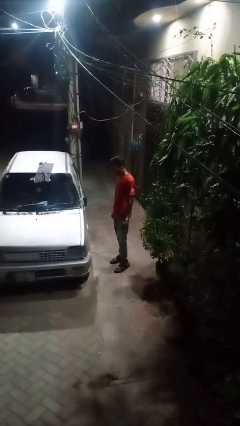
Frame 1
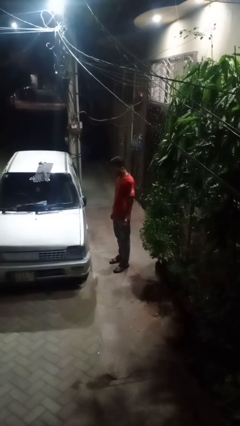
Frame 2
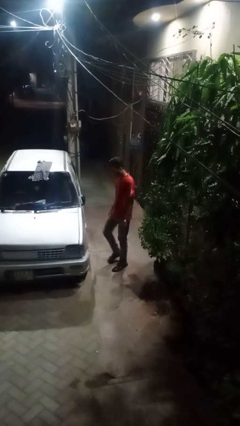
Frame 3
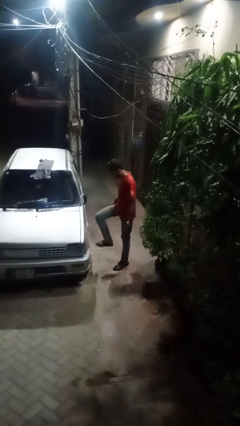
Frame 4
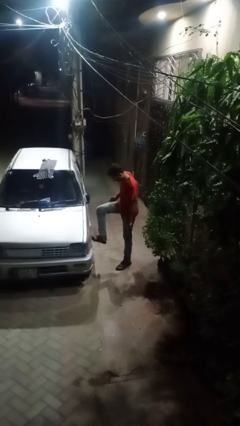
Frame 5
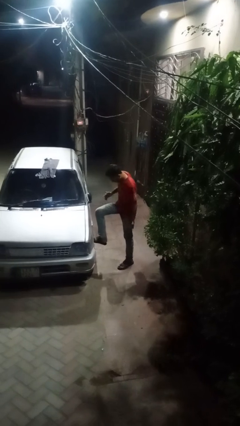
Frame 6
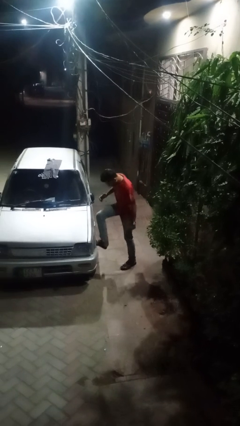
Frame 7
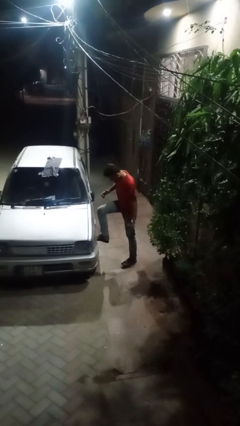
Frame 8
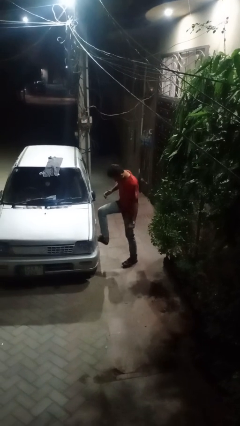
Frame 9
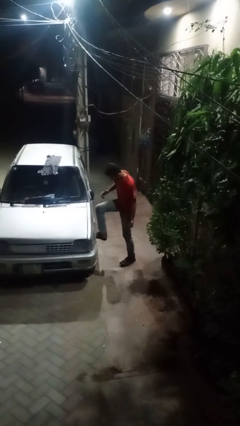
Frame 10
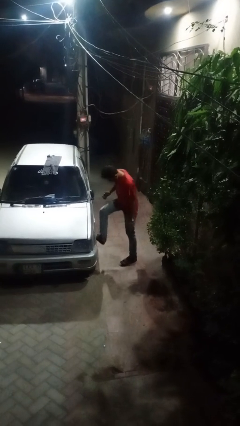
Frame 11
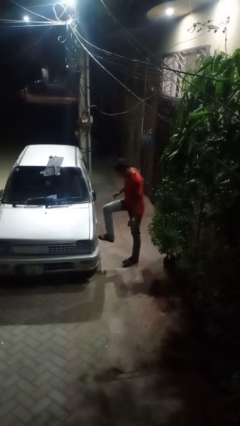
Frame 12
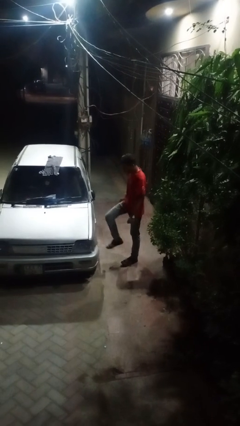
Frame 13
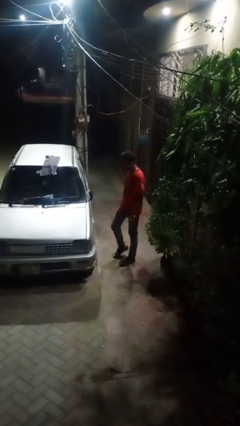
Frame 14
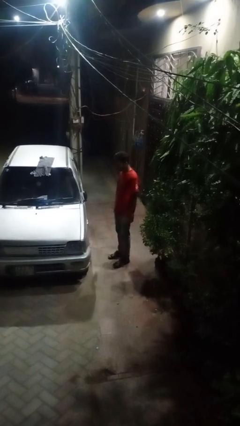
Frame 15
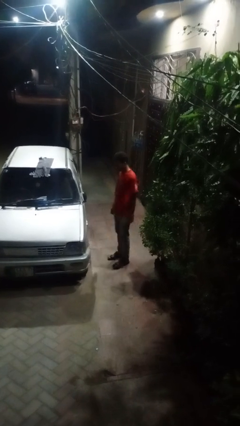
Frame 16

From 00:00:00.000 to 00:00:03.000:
person kicks car tires

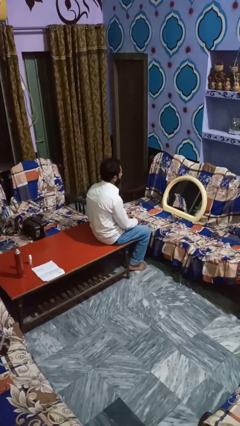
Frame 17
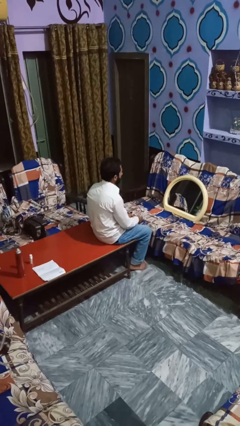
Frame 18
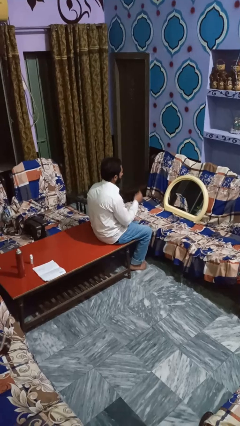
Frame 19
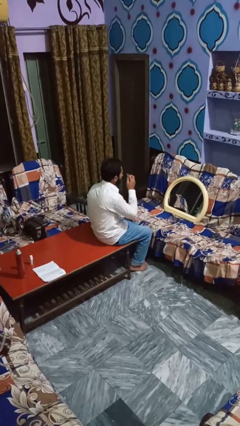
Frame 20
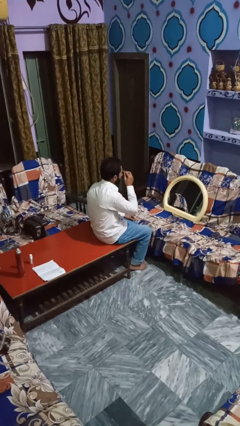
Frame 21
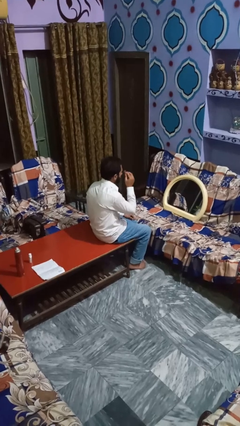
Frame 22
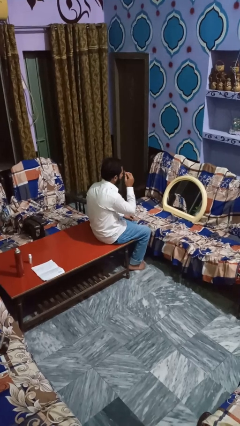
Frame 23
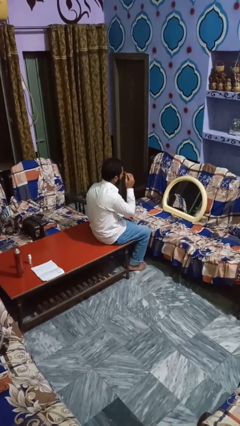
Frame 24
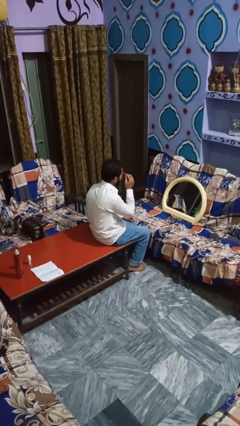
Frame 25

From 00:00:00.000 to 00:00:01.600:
person applies eye makeup

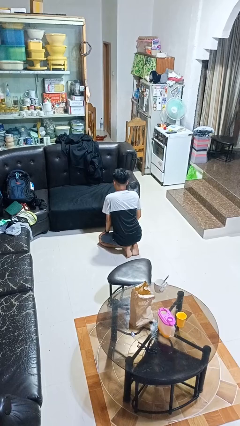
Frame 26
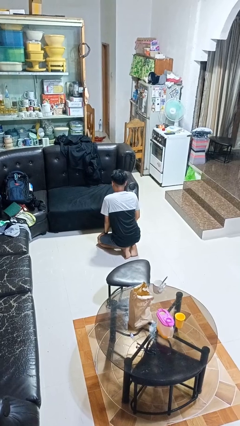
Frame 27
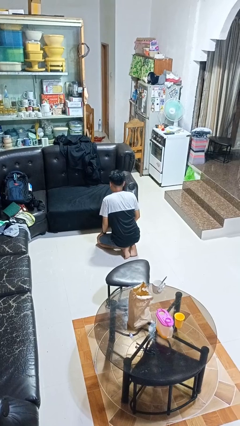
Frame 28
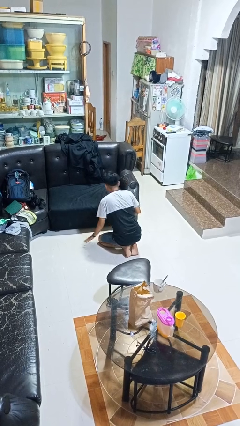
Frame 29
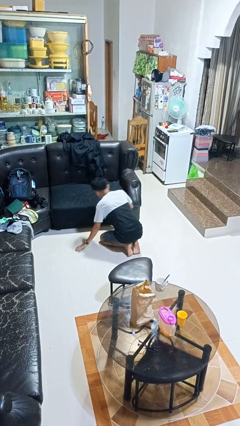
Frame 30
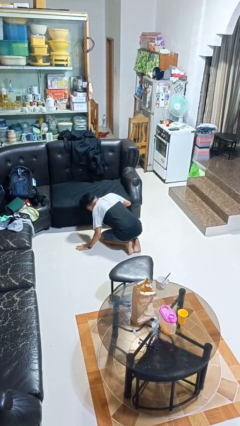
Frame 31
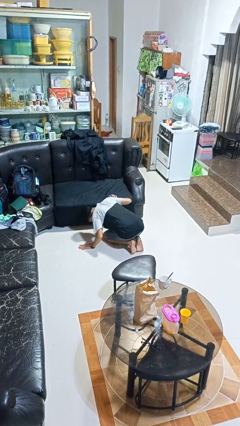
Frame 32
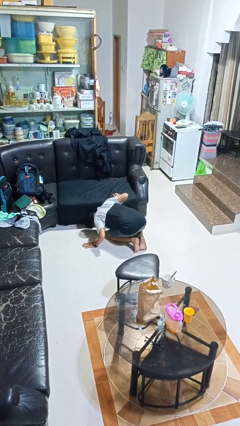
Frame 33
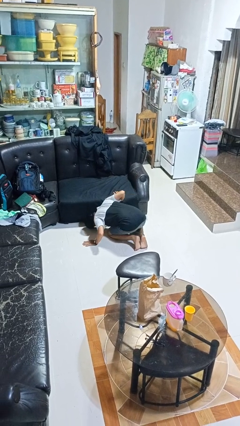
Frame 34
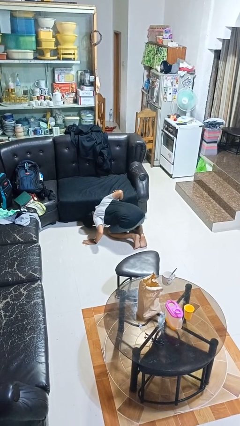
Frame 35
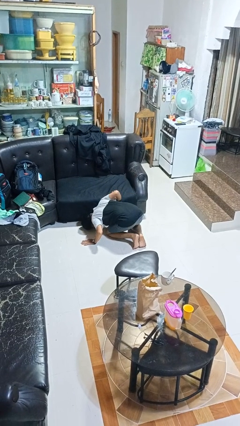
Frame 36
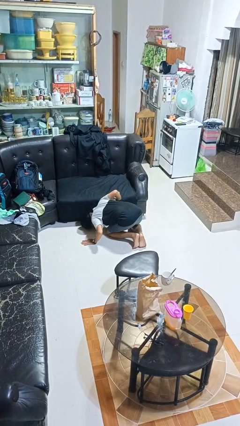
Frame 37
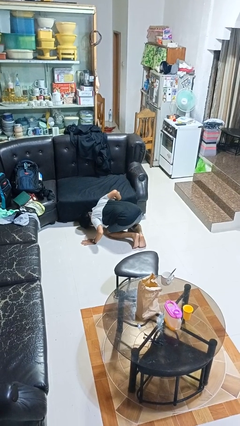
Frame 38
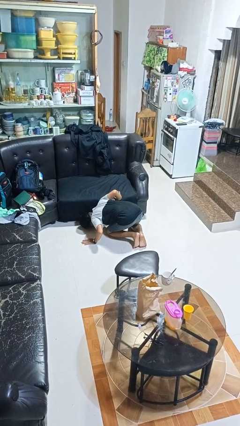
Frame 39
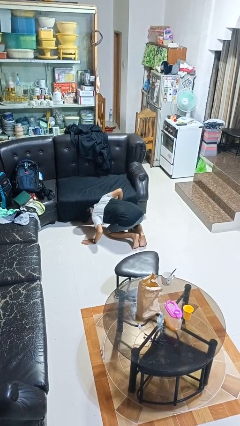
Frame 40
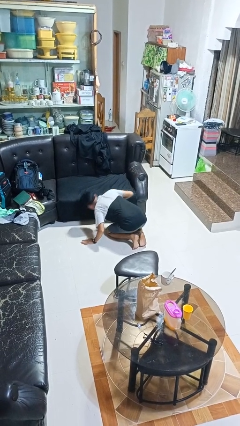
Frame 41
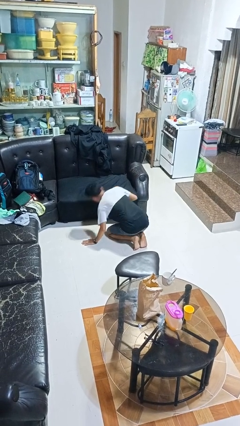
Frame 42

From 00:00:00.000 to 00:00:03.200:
person searches under couch

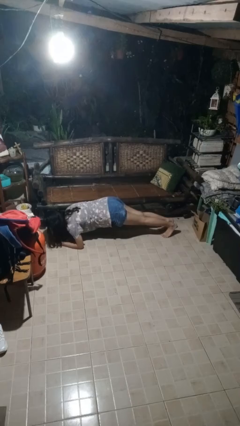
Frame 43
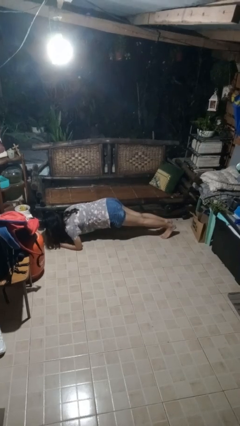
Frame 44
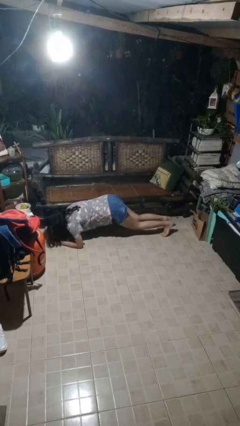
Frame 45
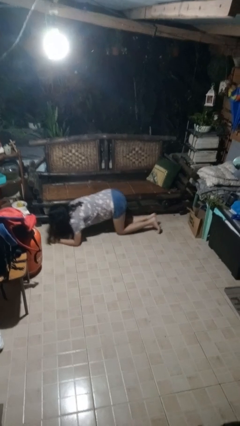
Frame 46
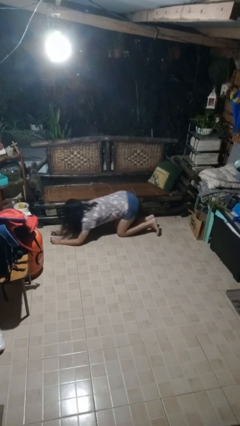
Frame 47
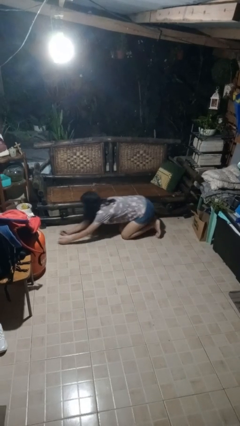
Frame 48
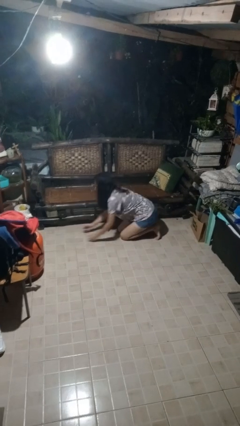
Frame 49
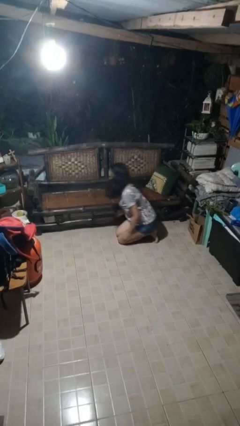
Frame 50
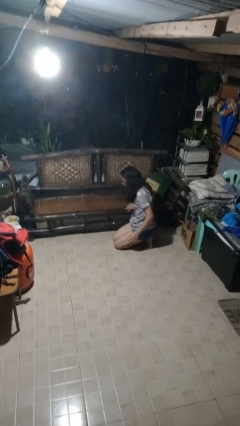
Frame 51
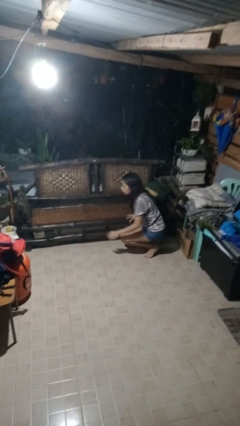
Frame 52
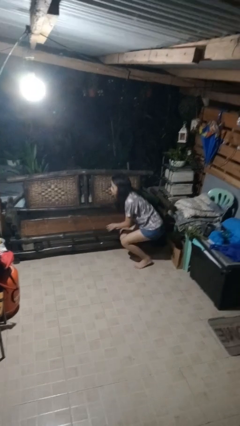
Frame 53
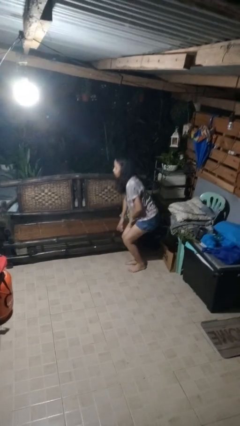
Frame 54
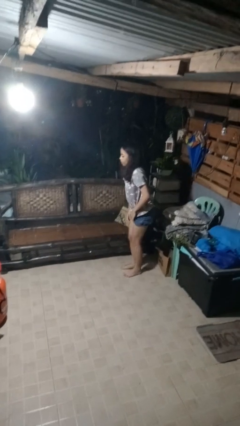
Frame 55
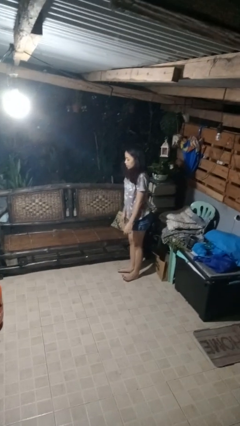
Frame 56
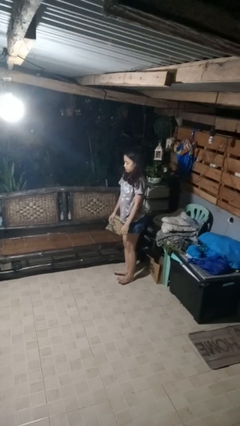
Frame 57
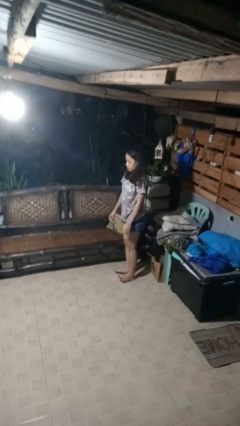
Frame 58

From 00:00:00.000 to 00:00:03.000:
person stands up from floor

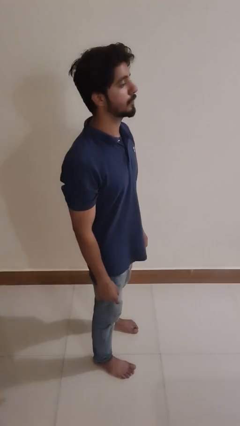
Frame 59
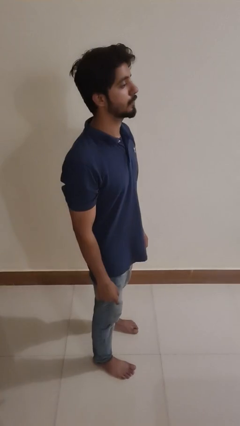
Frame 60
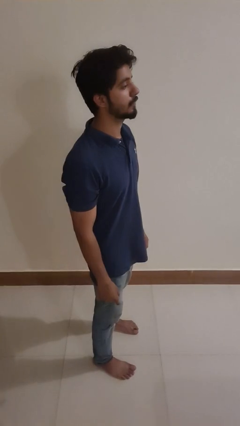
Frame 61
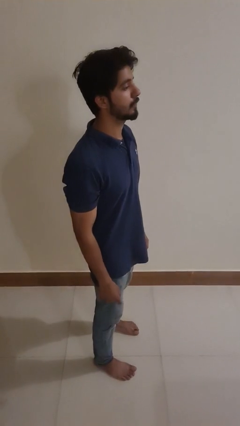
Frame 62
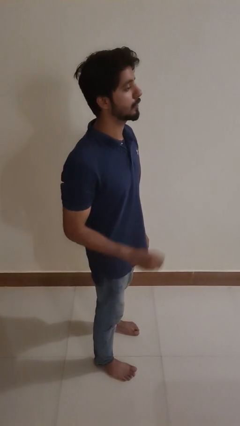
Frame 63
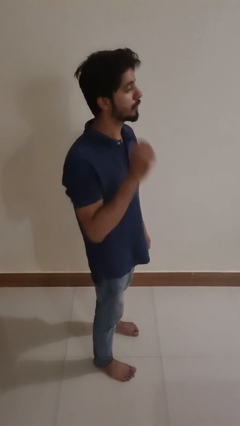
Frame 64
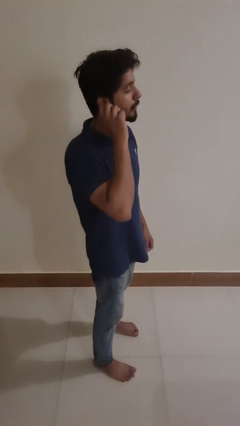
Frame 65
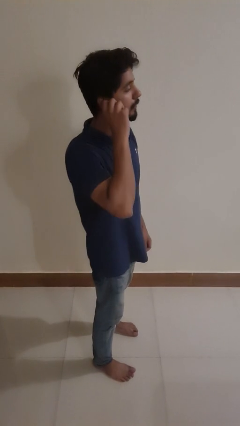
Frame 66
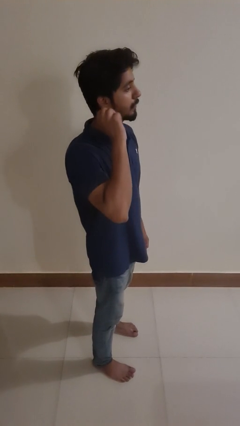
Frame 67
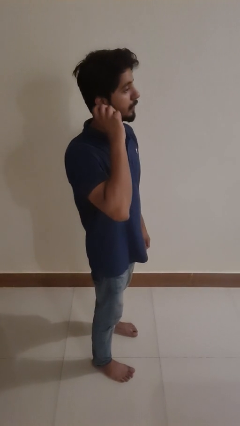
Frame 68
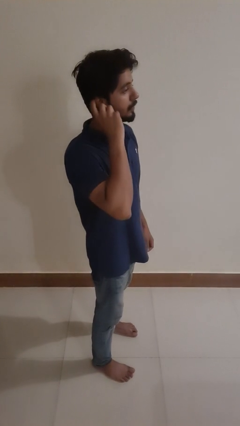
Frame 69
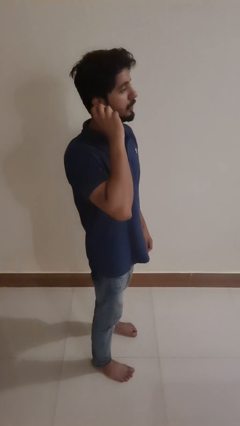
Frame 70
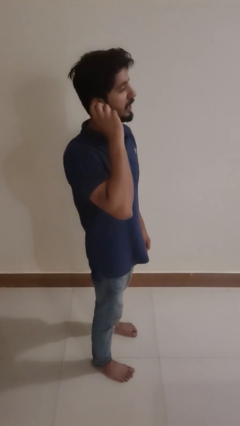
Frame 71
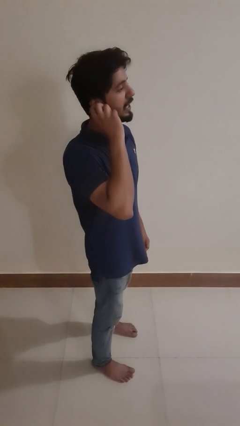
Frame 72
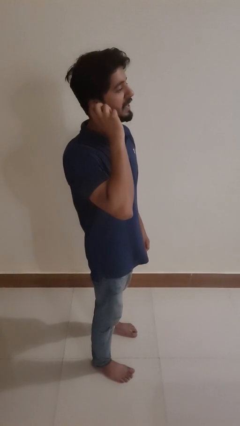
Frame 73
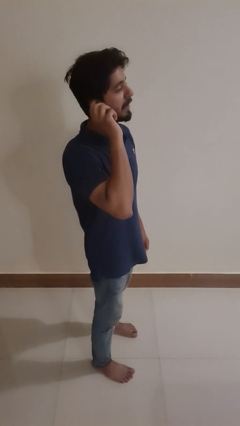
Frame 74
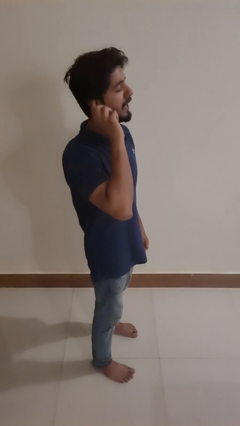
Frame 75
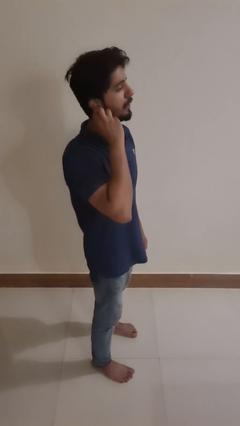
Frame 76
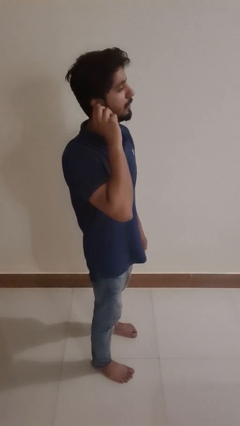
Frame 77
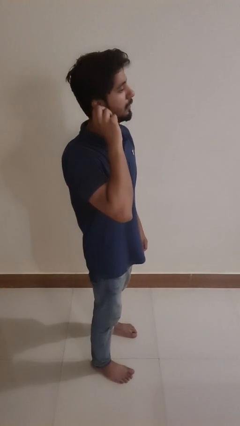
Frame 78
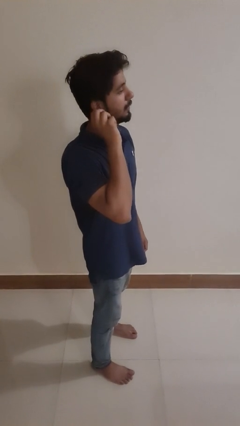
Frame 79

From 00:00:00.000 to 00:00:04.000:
person touches earlobe

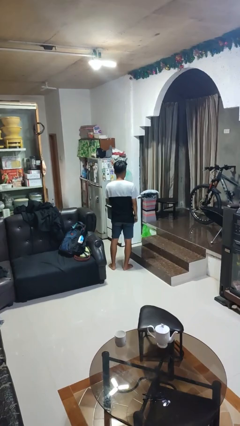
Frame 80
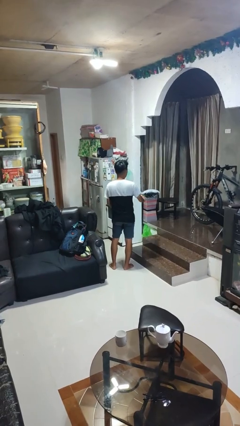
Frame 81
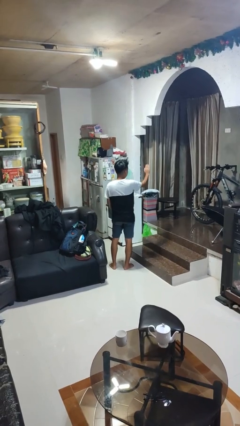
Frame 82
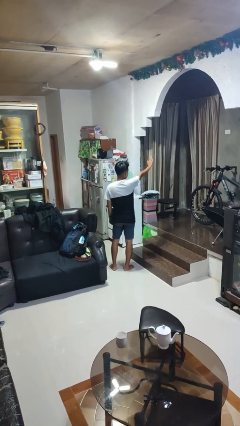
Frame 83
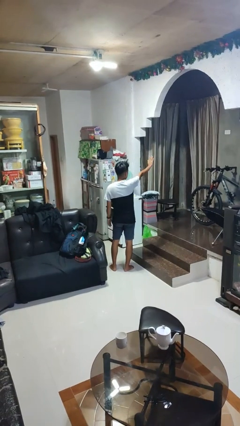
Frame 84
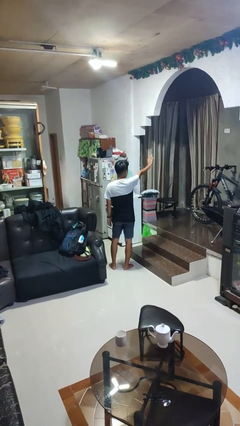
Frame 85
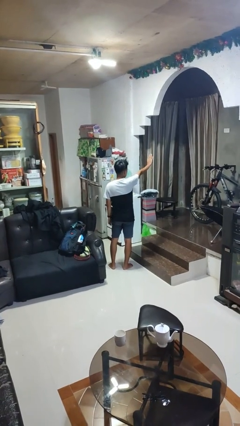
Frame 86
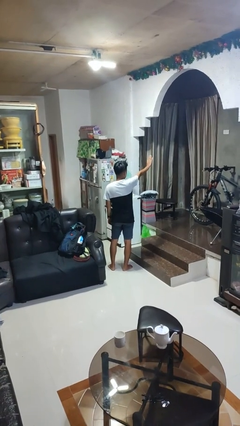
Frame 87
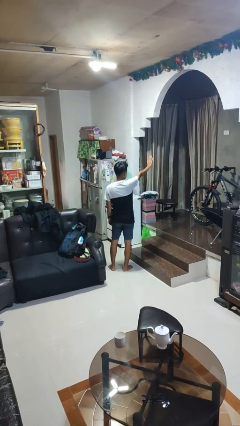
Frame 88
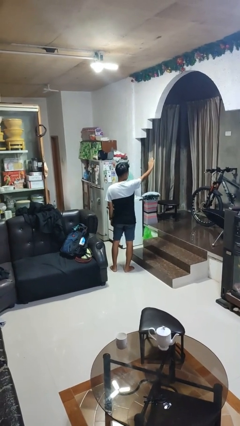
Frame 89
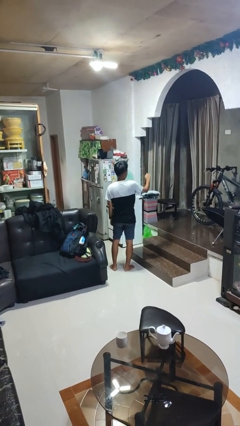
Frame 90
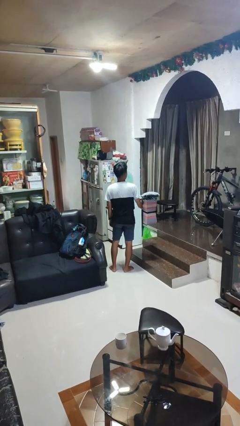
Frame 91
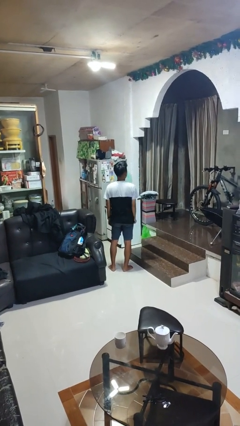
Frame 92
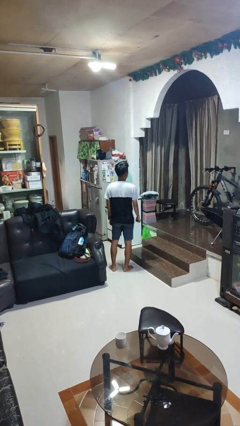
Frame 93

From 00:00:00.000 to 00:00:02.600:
person gestures stop

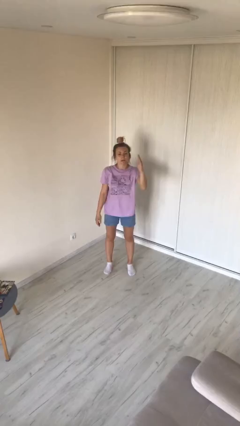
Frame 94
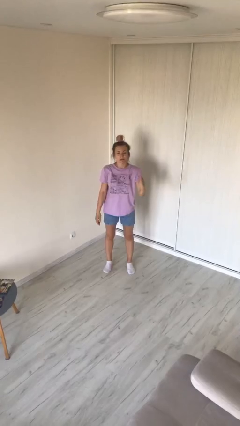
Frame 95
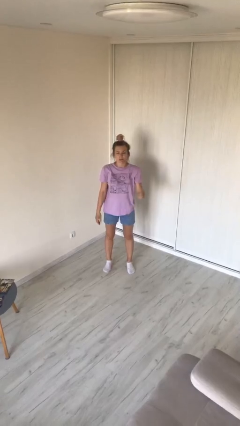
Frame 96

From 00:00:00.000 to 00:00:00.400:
person gestures lower hand
